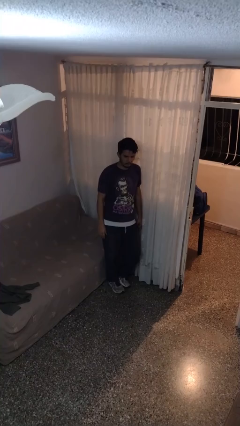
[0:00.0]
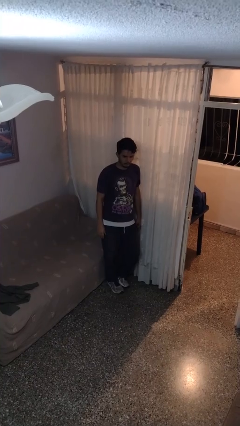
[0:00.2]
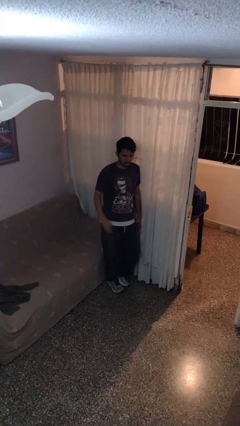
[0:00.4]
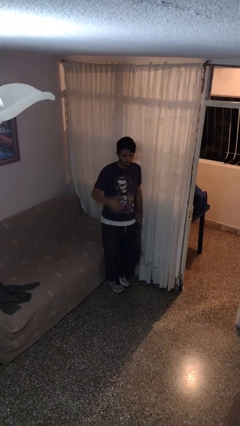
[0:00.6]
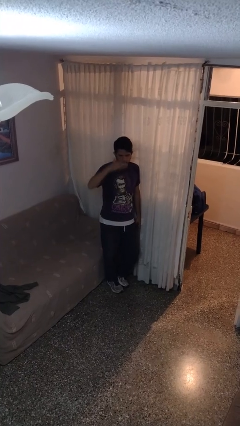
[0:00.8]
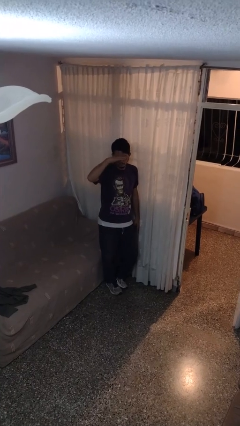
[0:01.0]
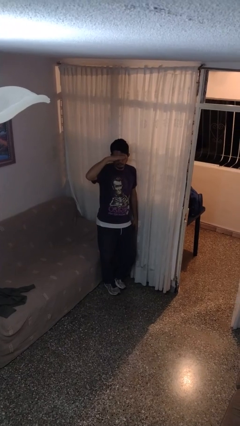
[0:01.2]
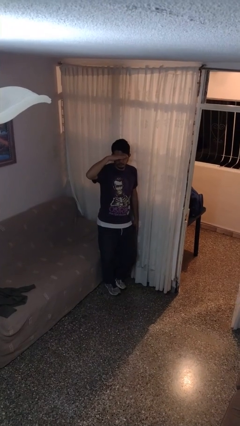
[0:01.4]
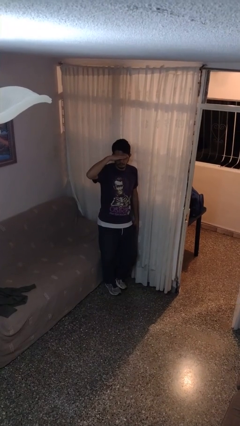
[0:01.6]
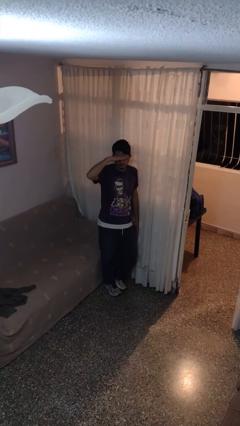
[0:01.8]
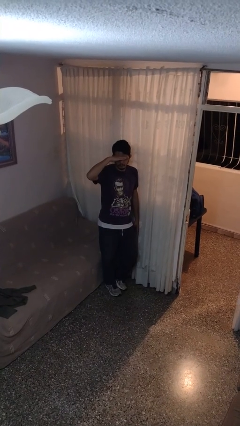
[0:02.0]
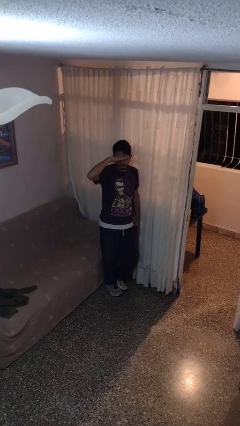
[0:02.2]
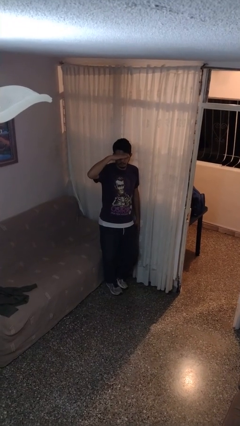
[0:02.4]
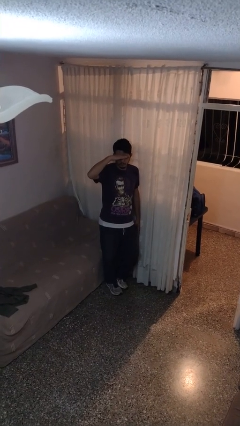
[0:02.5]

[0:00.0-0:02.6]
person shades eyes

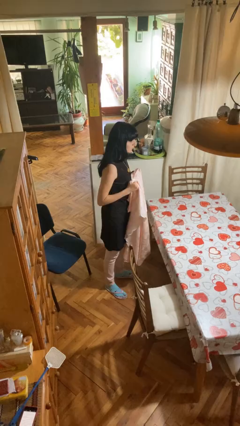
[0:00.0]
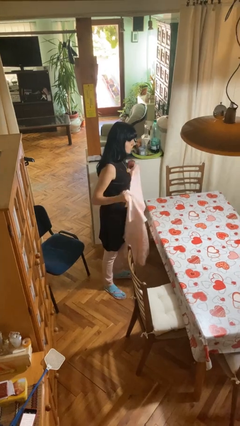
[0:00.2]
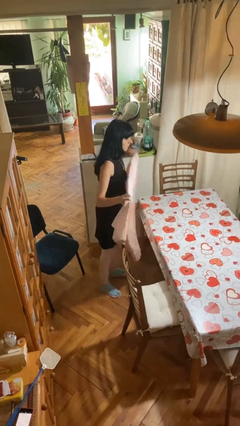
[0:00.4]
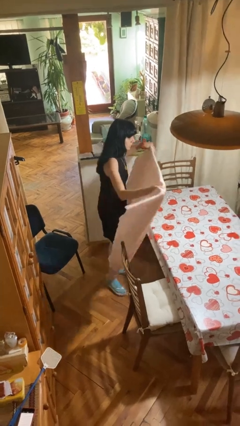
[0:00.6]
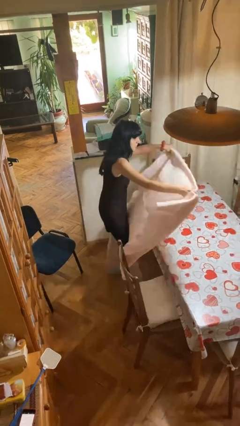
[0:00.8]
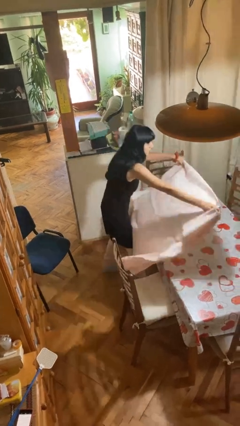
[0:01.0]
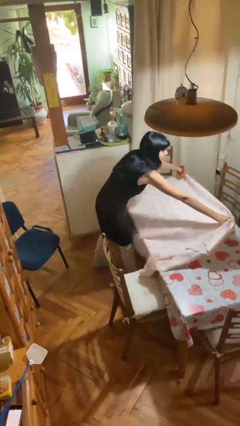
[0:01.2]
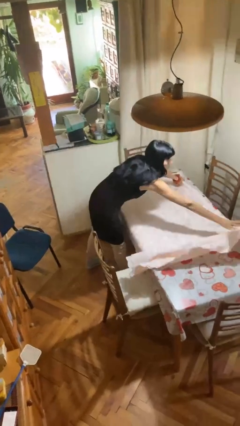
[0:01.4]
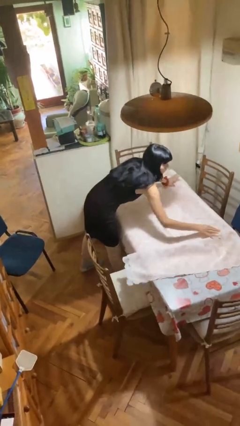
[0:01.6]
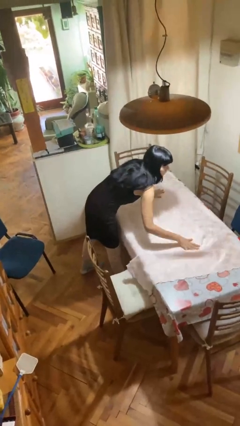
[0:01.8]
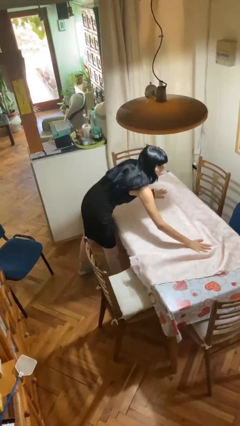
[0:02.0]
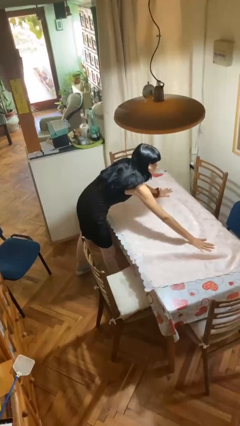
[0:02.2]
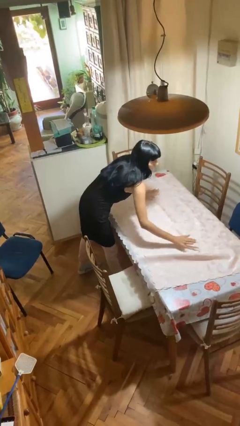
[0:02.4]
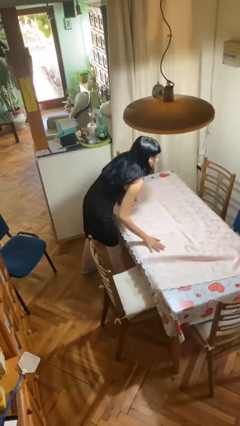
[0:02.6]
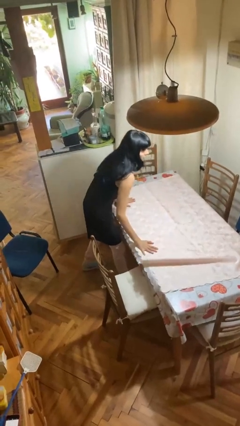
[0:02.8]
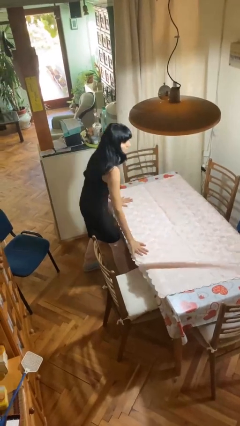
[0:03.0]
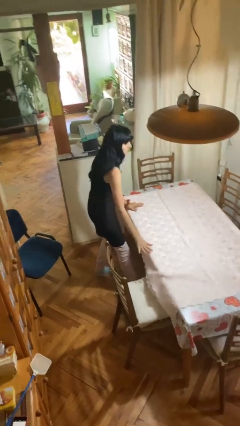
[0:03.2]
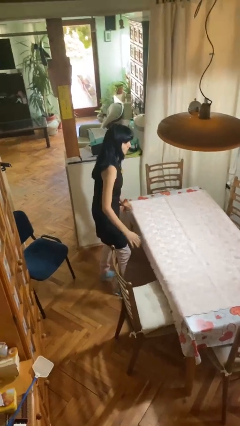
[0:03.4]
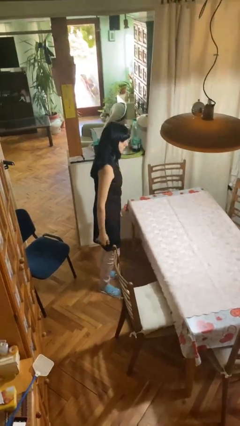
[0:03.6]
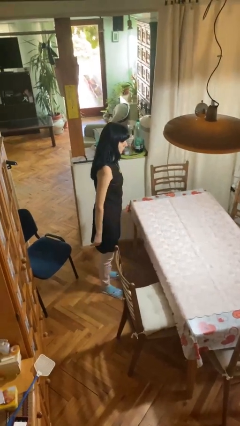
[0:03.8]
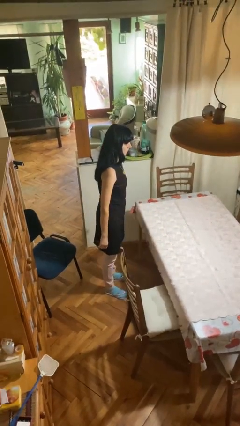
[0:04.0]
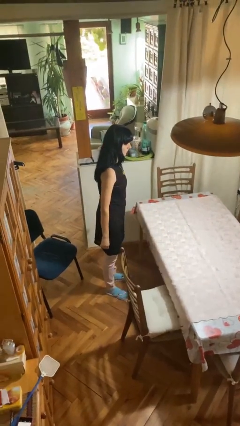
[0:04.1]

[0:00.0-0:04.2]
person spreads tablecloth

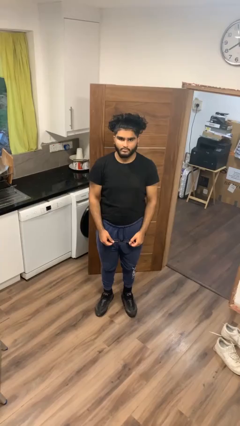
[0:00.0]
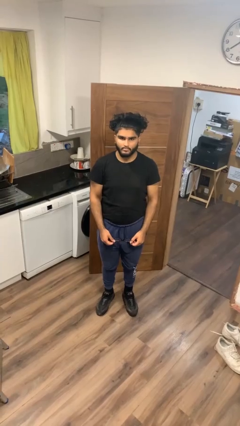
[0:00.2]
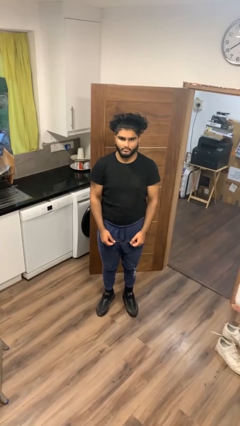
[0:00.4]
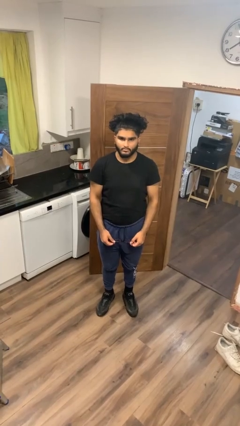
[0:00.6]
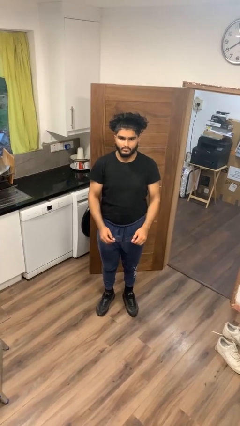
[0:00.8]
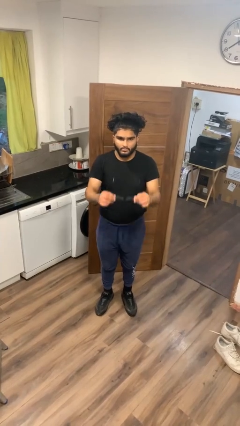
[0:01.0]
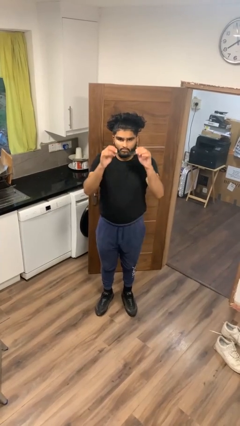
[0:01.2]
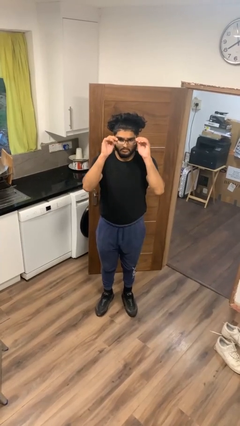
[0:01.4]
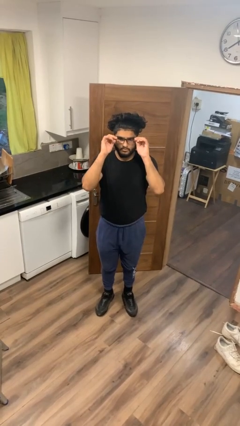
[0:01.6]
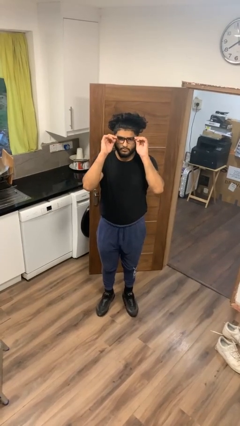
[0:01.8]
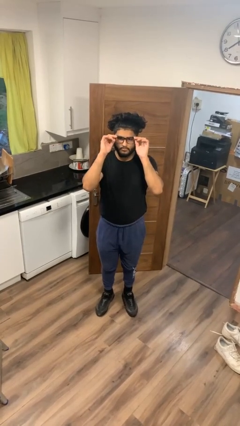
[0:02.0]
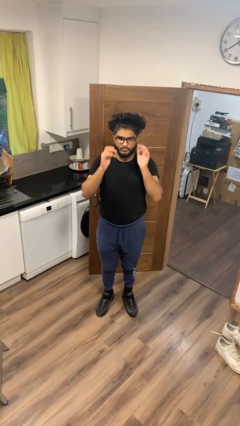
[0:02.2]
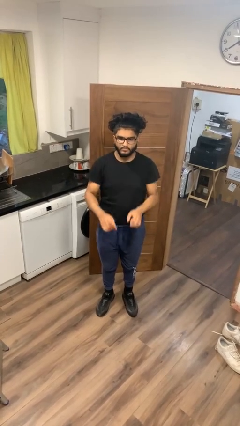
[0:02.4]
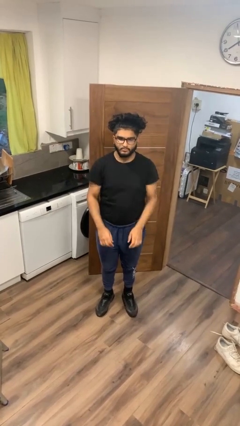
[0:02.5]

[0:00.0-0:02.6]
person puts on glasses

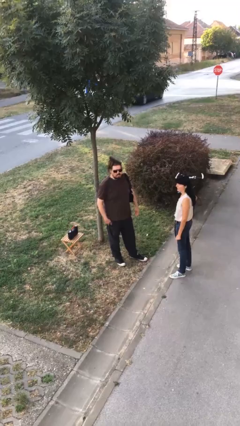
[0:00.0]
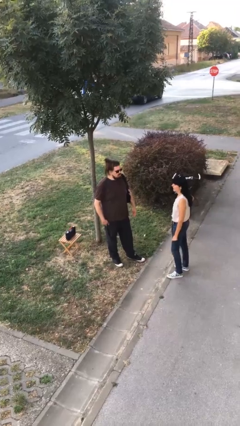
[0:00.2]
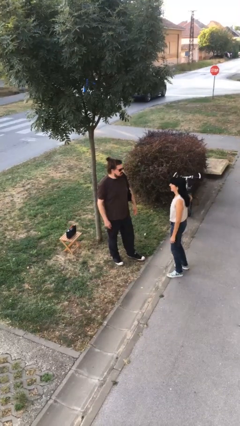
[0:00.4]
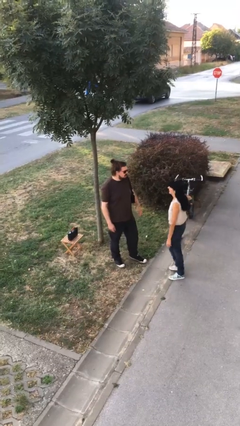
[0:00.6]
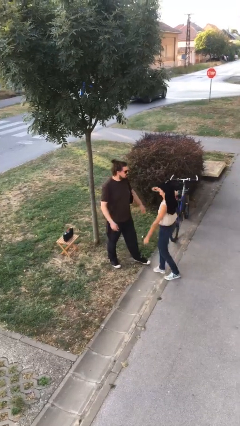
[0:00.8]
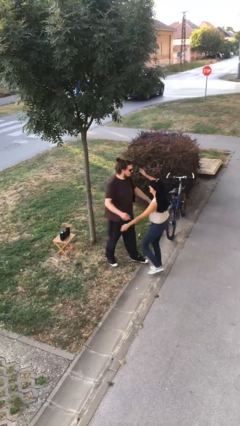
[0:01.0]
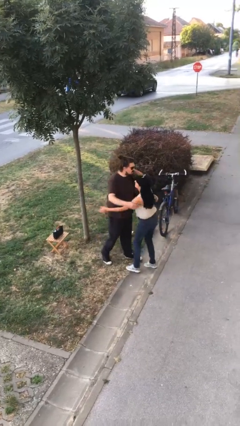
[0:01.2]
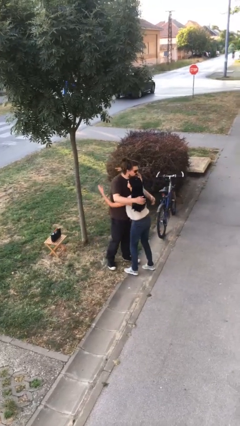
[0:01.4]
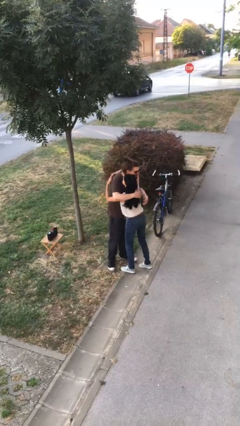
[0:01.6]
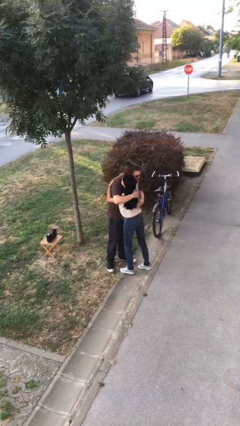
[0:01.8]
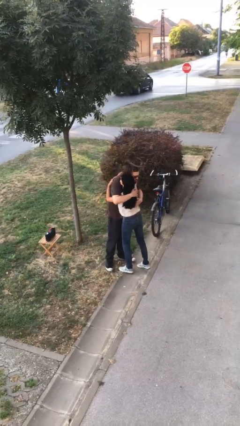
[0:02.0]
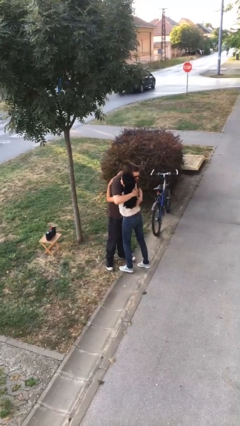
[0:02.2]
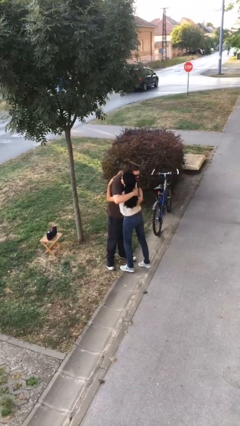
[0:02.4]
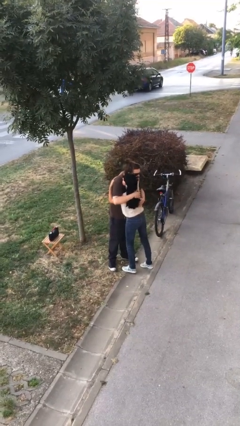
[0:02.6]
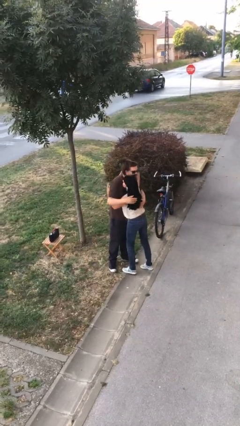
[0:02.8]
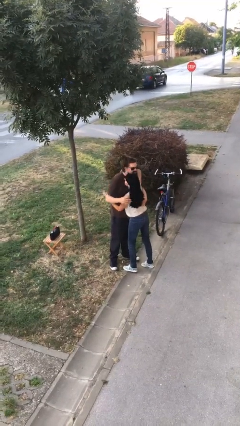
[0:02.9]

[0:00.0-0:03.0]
person embraces person

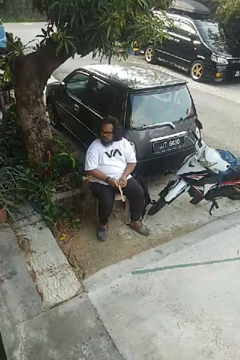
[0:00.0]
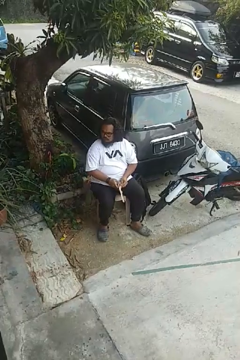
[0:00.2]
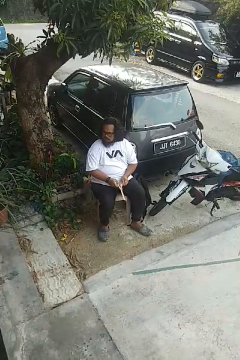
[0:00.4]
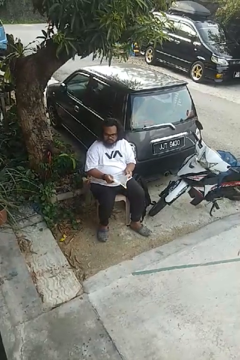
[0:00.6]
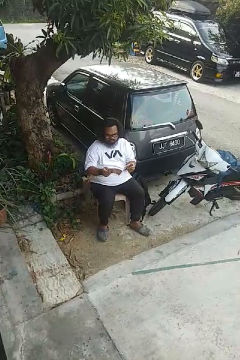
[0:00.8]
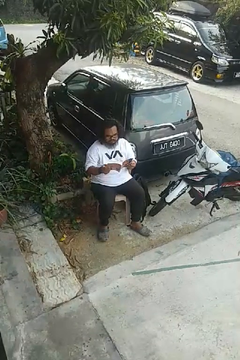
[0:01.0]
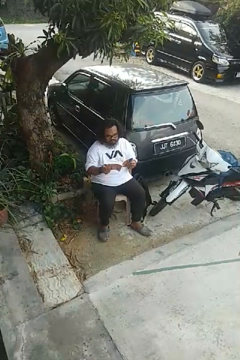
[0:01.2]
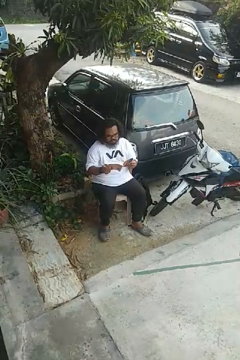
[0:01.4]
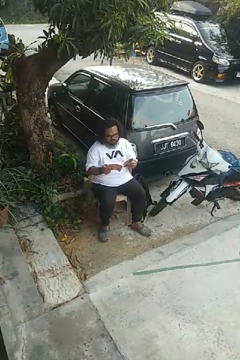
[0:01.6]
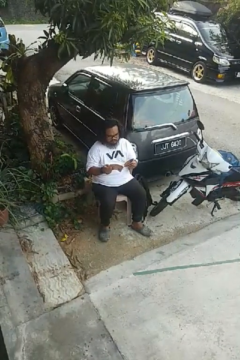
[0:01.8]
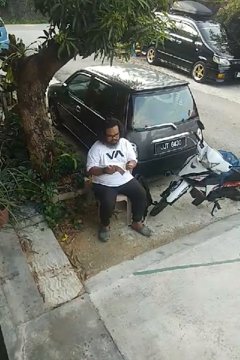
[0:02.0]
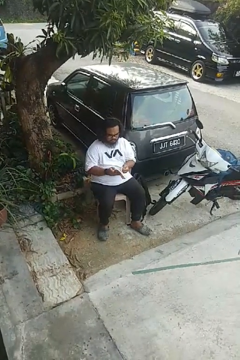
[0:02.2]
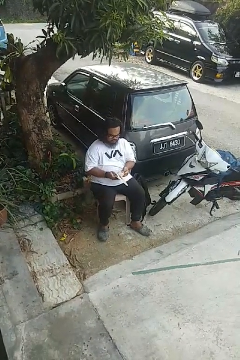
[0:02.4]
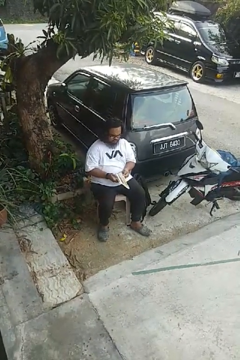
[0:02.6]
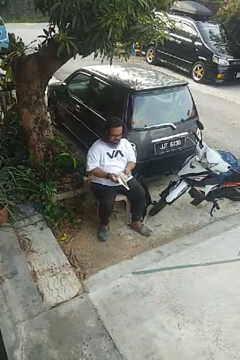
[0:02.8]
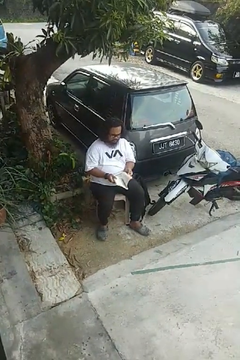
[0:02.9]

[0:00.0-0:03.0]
person reads book

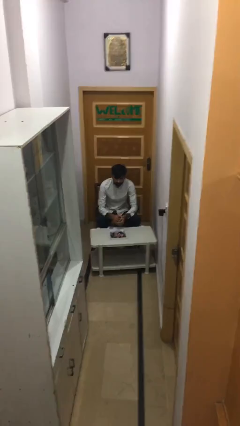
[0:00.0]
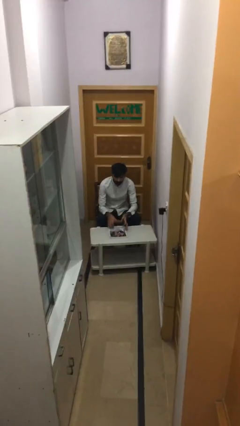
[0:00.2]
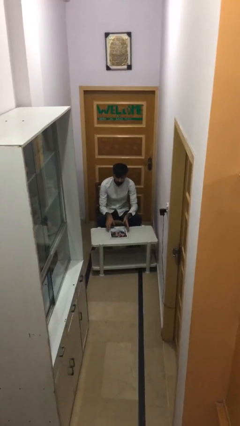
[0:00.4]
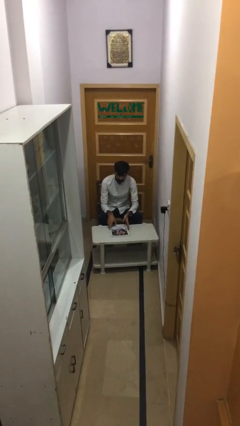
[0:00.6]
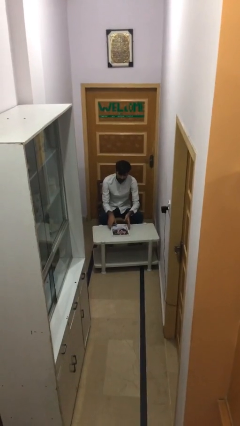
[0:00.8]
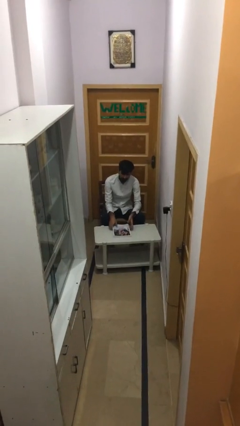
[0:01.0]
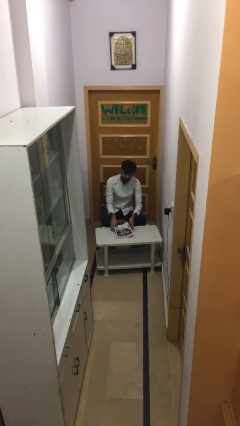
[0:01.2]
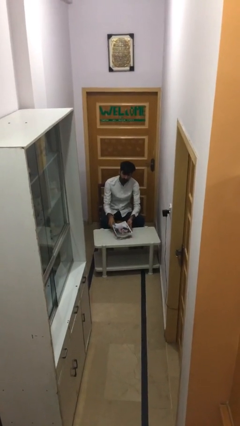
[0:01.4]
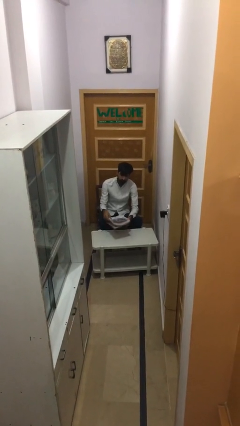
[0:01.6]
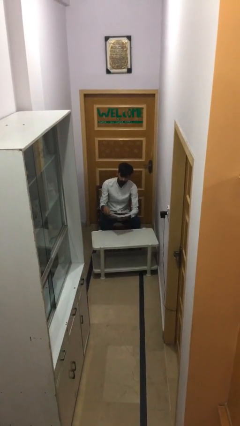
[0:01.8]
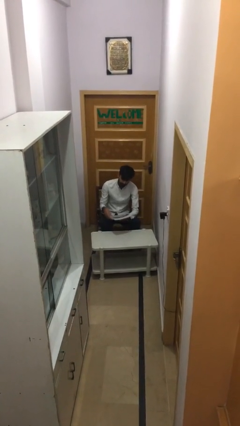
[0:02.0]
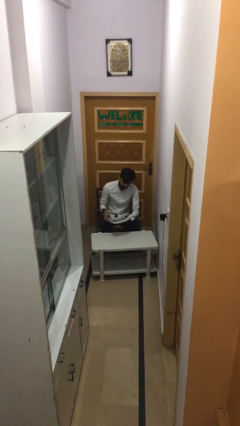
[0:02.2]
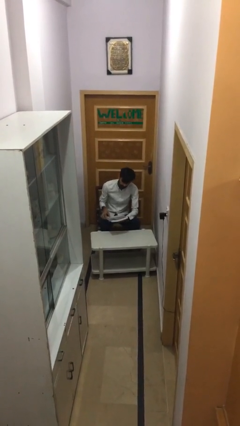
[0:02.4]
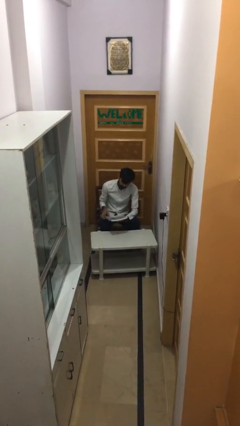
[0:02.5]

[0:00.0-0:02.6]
person picks up object from table
